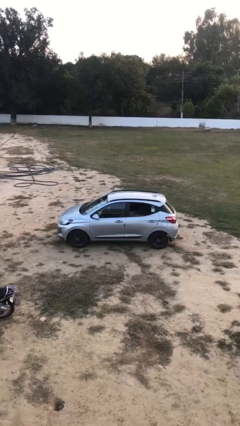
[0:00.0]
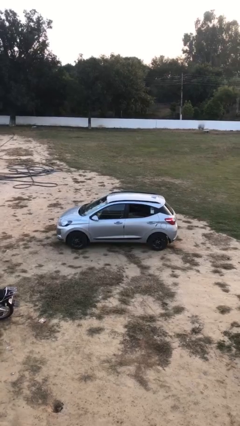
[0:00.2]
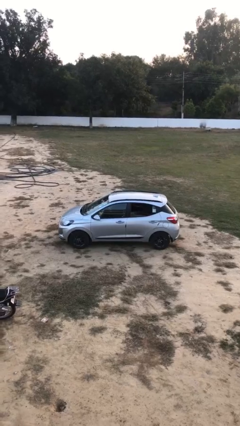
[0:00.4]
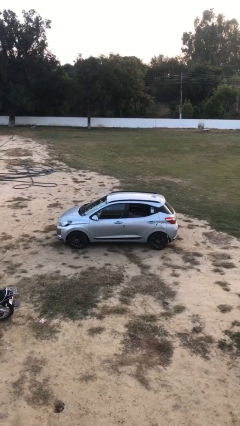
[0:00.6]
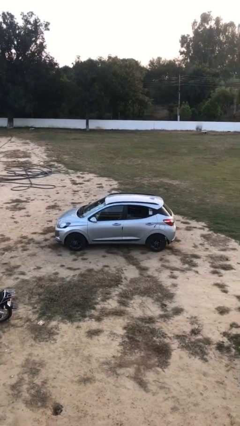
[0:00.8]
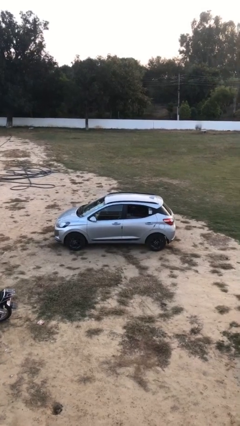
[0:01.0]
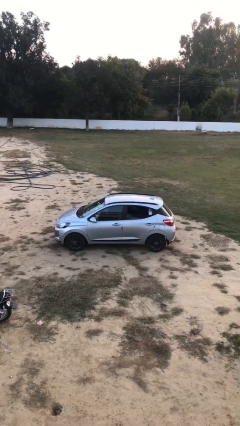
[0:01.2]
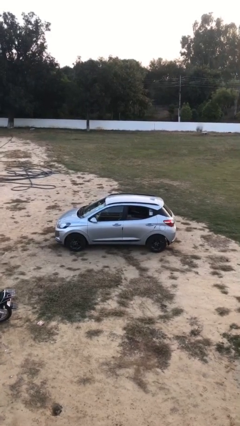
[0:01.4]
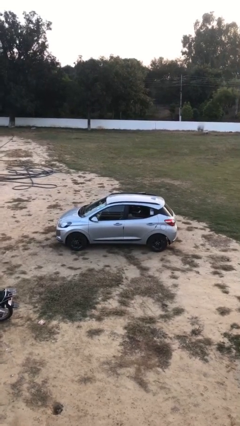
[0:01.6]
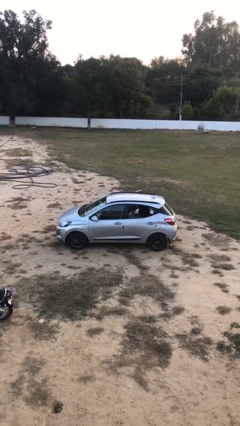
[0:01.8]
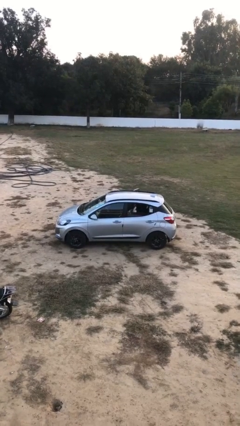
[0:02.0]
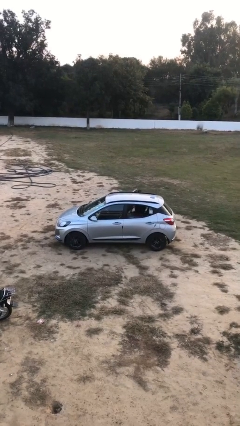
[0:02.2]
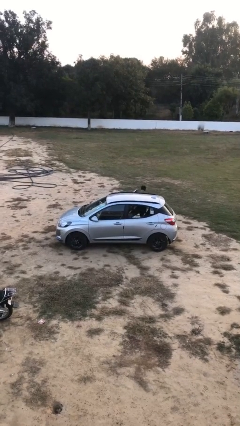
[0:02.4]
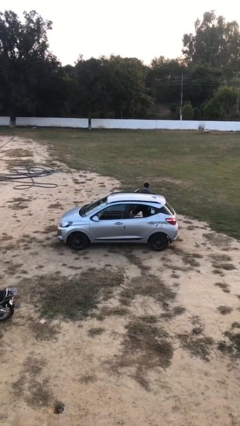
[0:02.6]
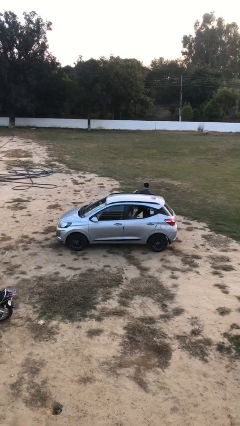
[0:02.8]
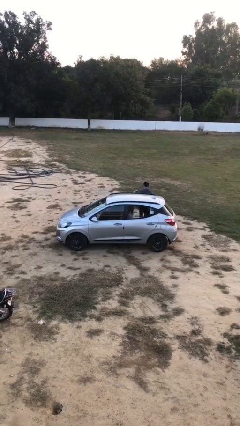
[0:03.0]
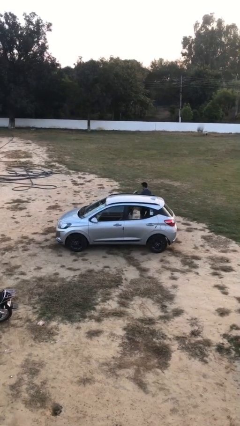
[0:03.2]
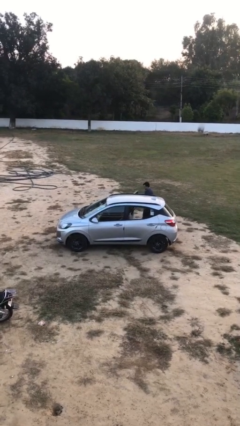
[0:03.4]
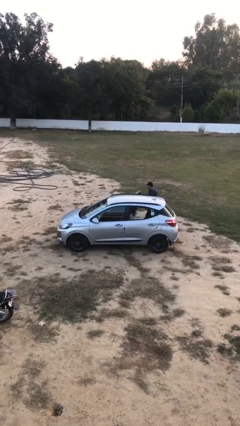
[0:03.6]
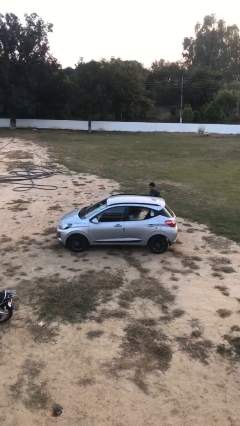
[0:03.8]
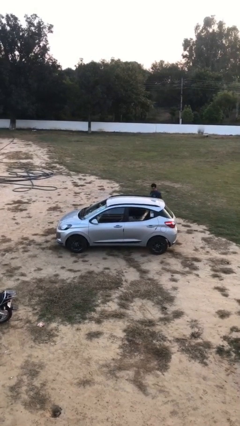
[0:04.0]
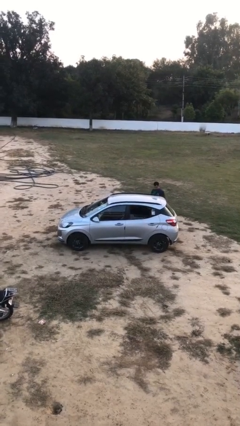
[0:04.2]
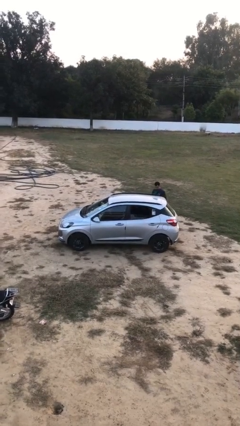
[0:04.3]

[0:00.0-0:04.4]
car drops off person

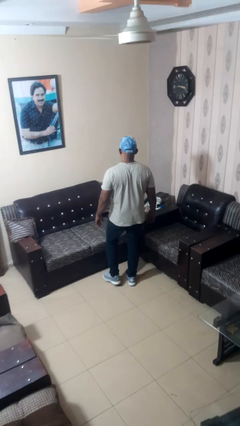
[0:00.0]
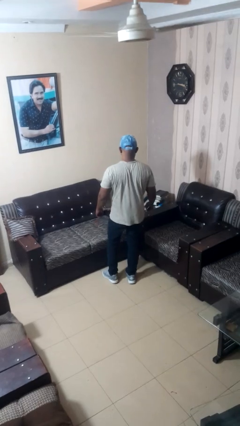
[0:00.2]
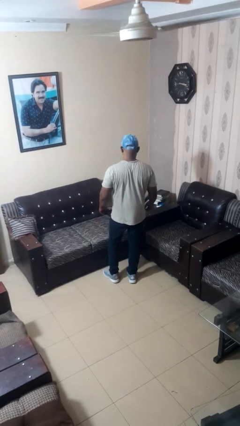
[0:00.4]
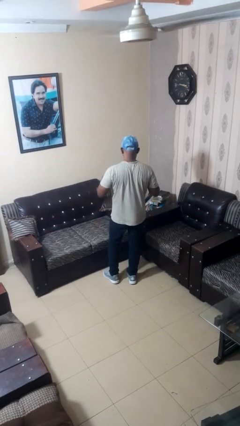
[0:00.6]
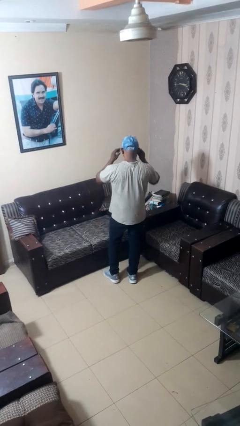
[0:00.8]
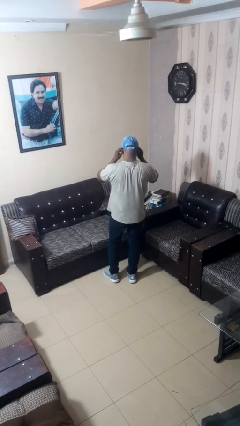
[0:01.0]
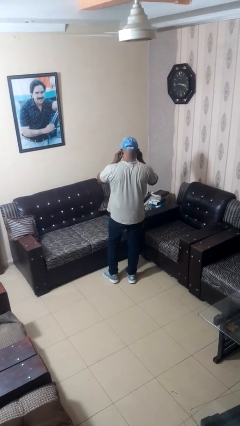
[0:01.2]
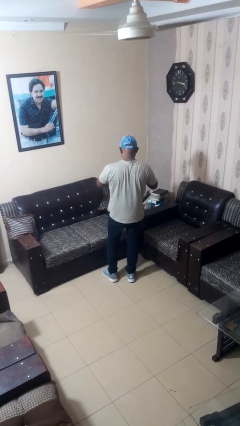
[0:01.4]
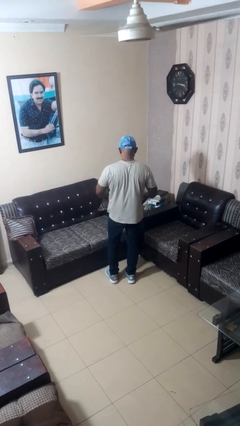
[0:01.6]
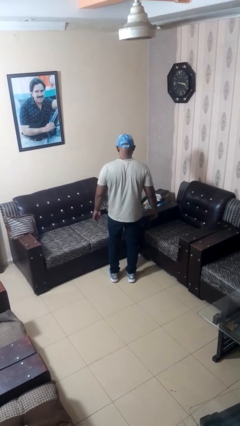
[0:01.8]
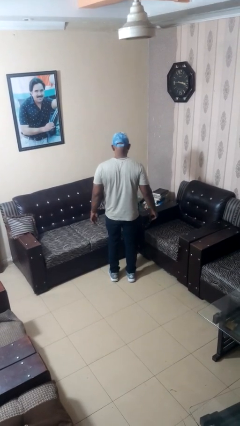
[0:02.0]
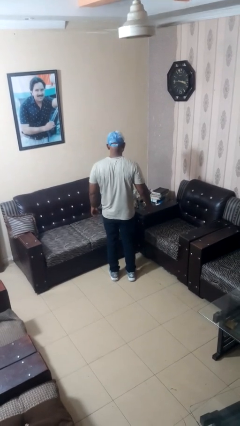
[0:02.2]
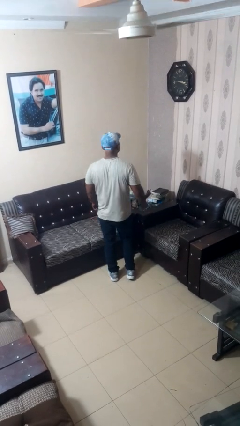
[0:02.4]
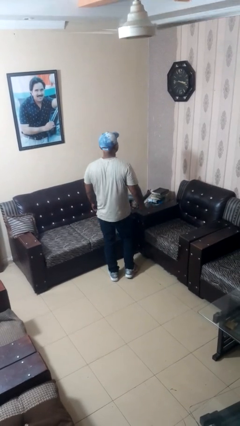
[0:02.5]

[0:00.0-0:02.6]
person takes off glasses

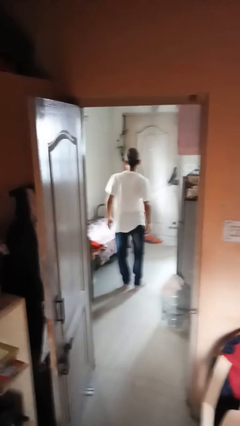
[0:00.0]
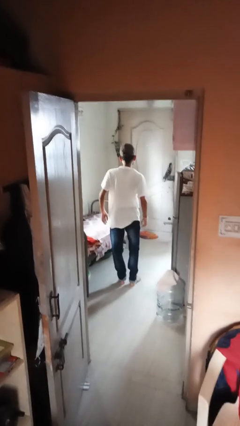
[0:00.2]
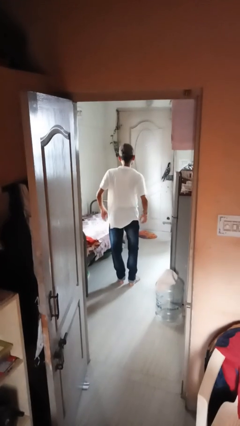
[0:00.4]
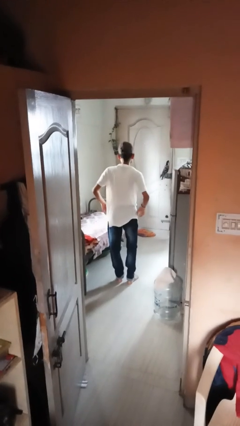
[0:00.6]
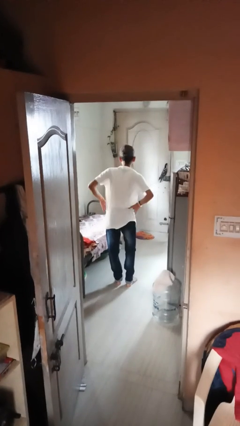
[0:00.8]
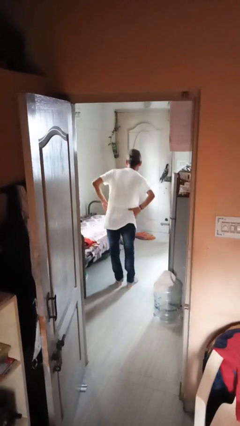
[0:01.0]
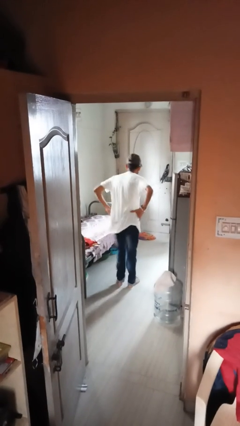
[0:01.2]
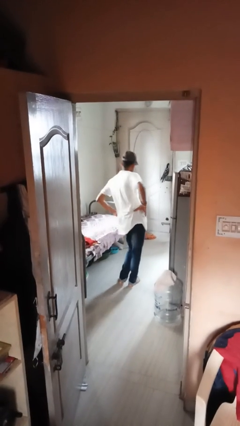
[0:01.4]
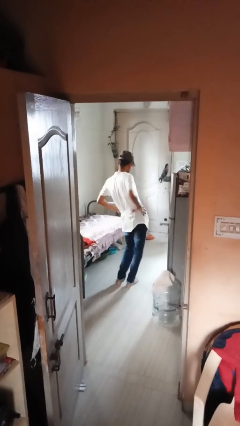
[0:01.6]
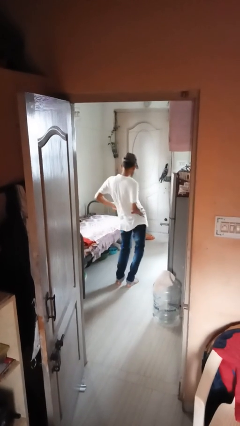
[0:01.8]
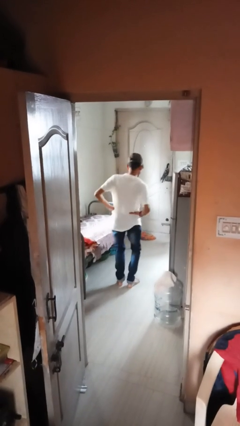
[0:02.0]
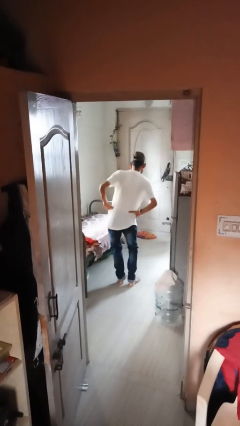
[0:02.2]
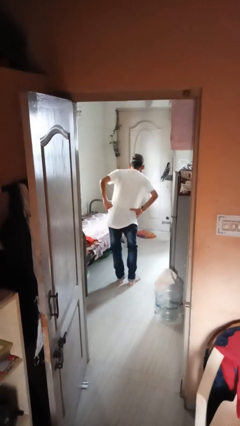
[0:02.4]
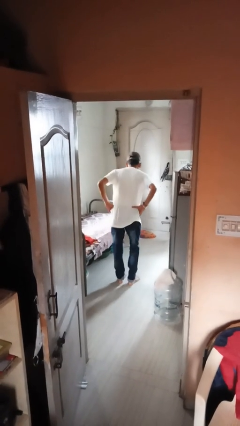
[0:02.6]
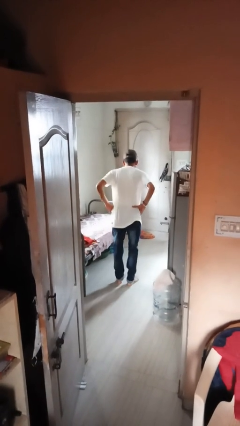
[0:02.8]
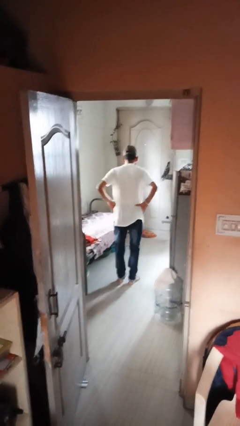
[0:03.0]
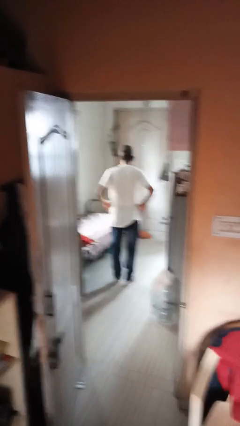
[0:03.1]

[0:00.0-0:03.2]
person wiggles hips

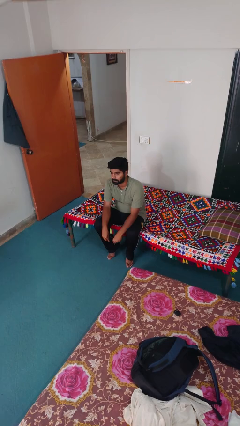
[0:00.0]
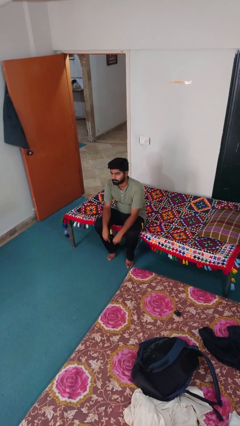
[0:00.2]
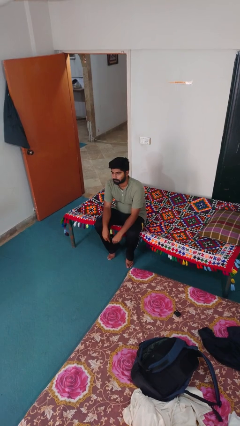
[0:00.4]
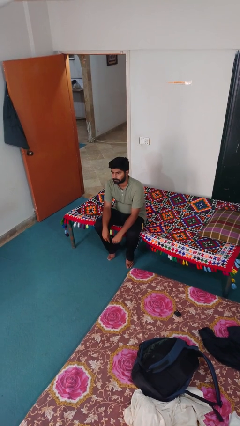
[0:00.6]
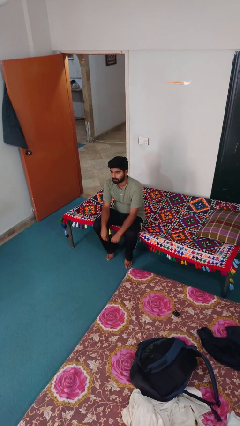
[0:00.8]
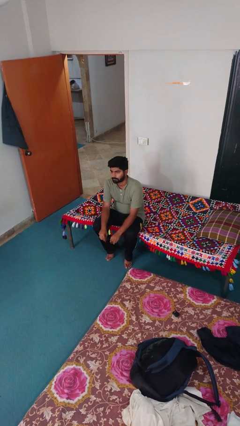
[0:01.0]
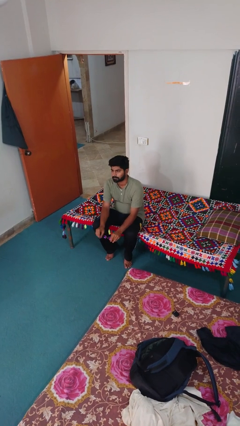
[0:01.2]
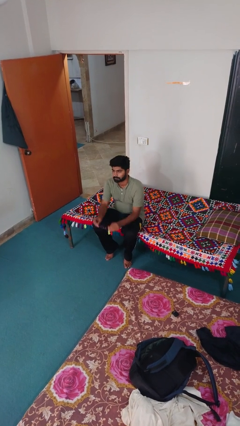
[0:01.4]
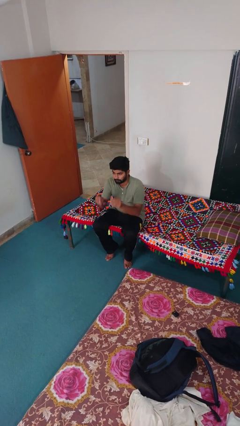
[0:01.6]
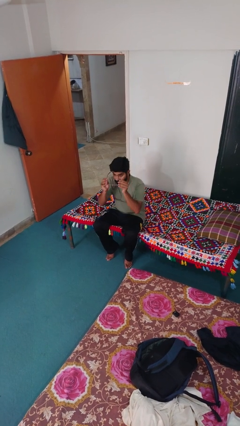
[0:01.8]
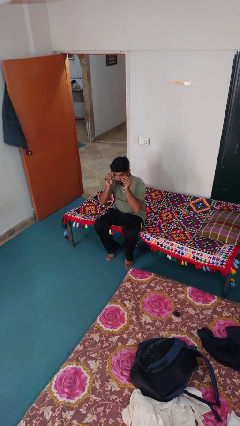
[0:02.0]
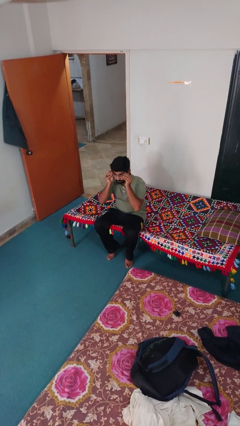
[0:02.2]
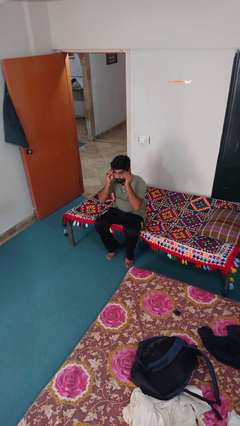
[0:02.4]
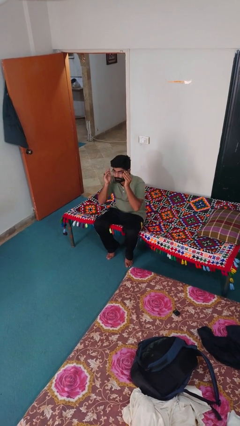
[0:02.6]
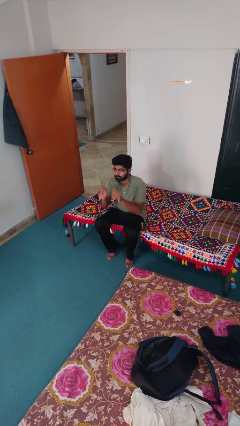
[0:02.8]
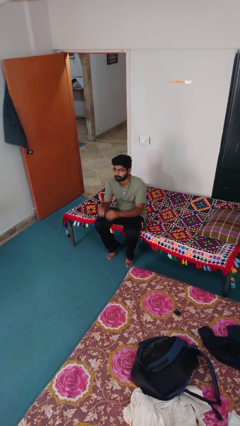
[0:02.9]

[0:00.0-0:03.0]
person puts on glasses

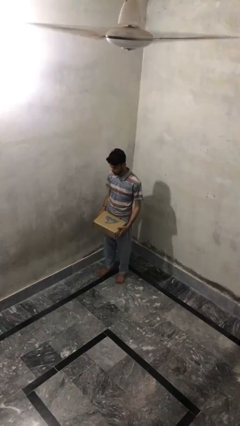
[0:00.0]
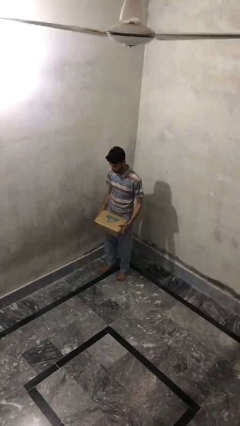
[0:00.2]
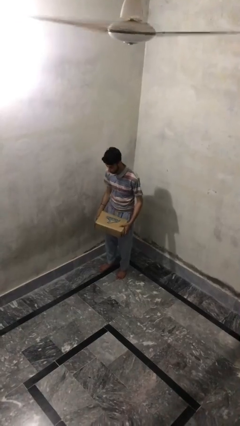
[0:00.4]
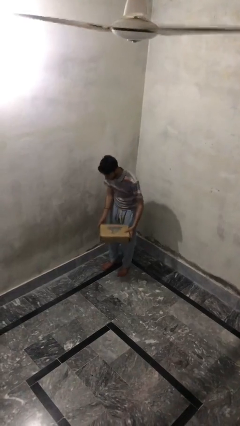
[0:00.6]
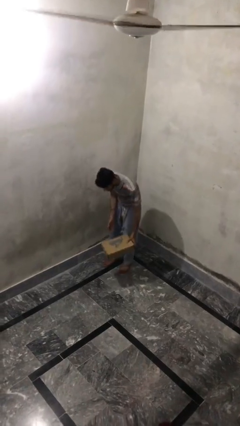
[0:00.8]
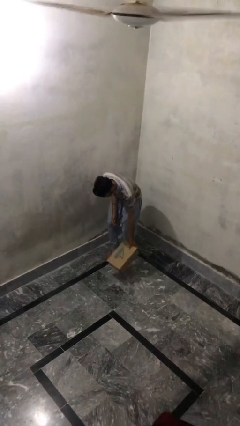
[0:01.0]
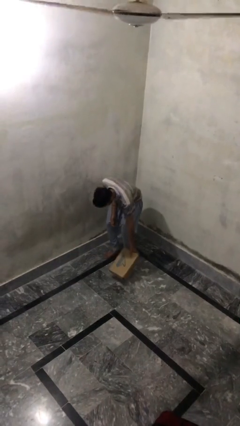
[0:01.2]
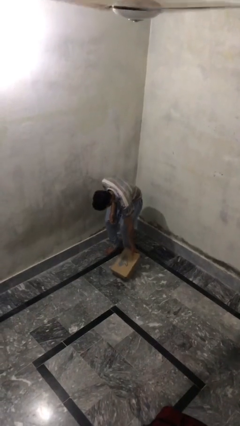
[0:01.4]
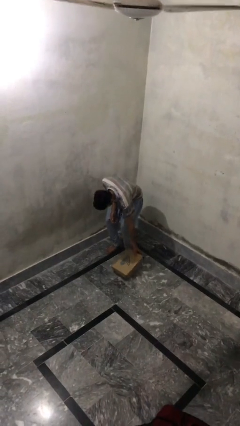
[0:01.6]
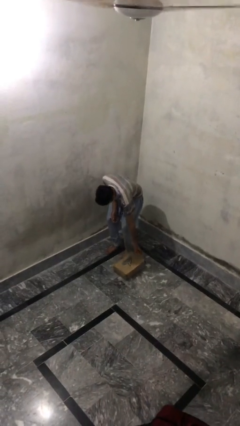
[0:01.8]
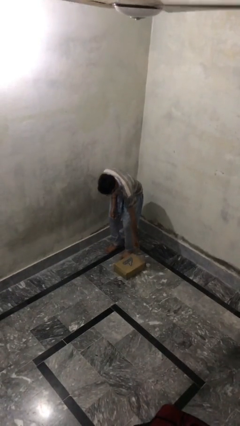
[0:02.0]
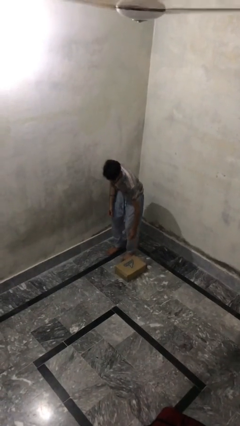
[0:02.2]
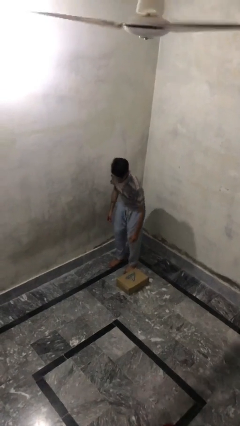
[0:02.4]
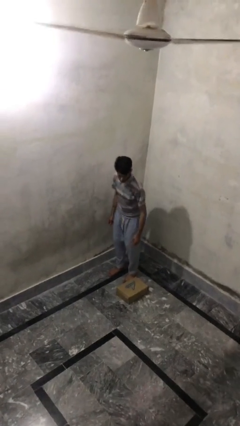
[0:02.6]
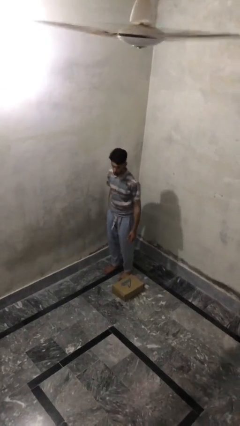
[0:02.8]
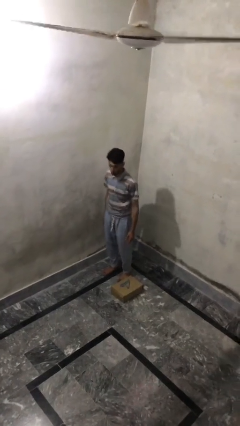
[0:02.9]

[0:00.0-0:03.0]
person puts down object on floor

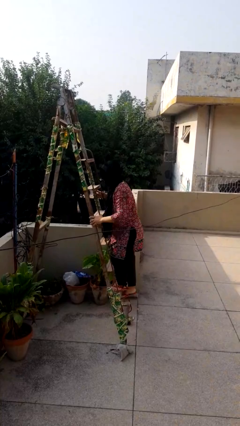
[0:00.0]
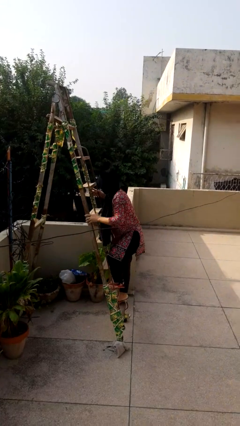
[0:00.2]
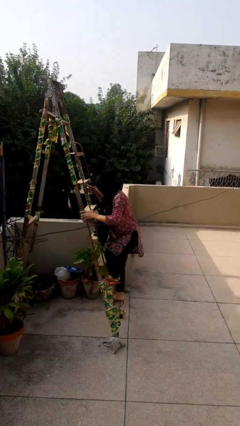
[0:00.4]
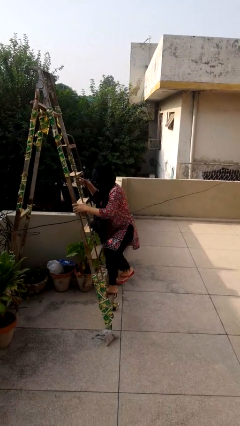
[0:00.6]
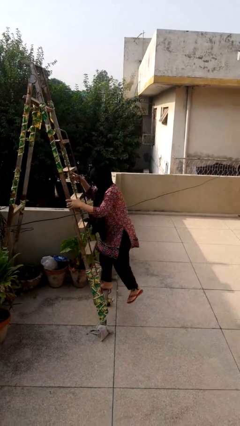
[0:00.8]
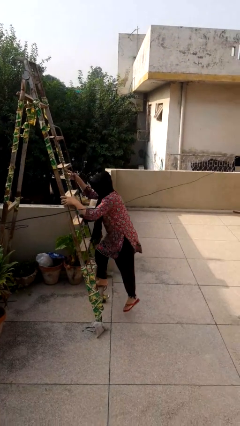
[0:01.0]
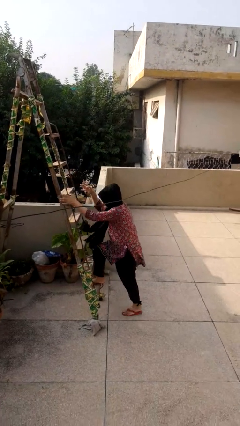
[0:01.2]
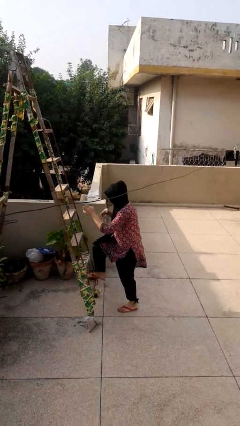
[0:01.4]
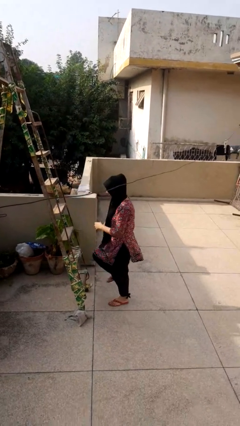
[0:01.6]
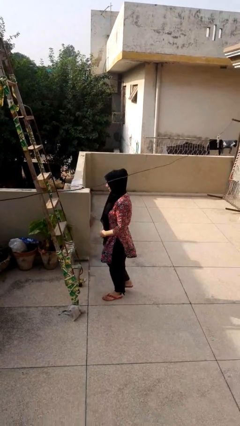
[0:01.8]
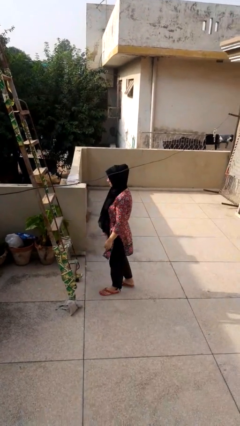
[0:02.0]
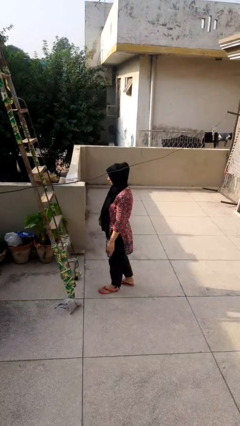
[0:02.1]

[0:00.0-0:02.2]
person climbs down ladder
